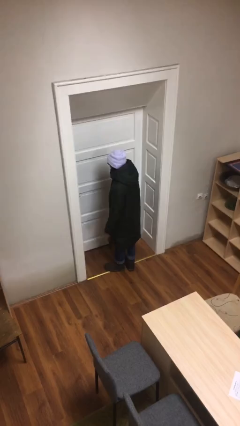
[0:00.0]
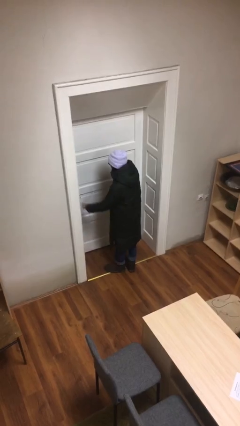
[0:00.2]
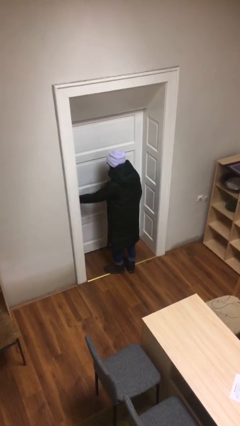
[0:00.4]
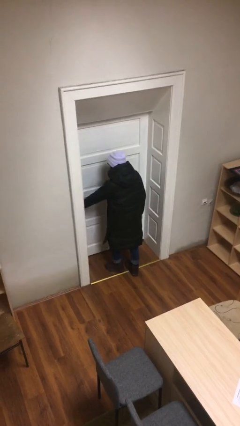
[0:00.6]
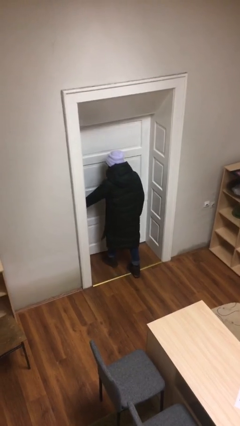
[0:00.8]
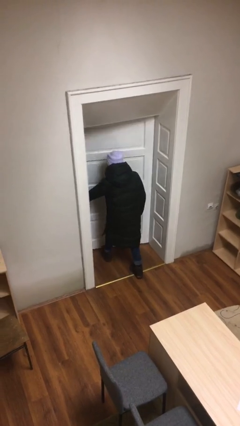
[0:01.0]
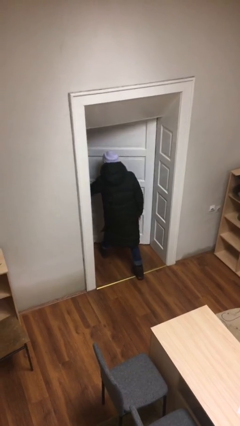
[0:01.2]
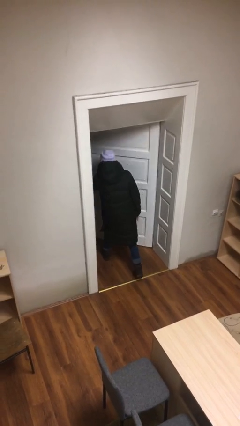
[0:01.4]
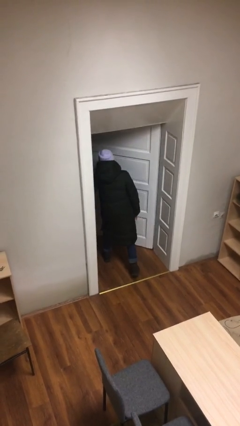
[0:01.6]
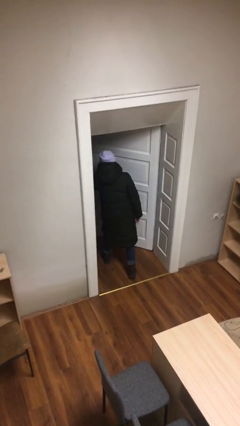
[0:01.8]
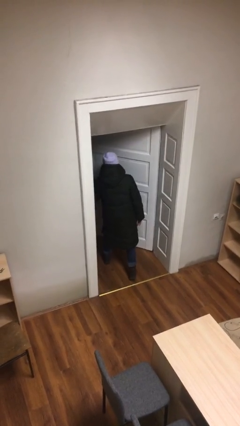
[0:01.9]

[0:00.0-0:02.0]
person opens facility door

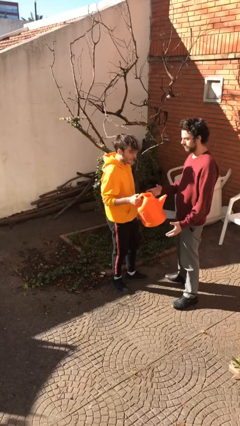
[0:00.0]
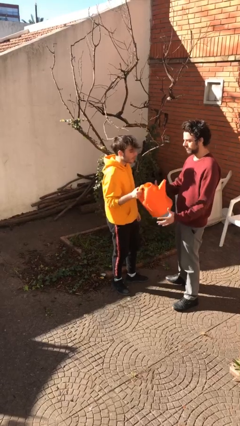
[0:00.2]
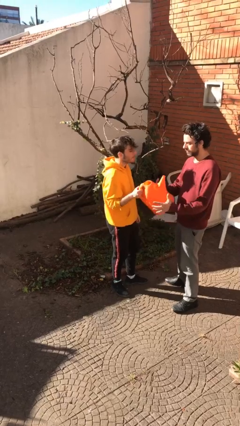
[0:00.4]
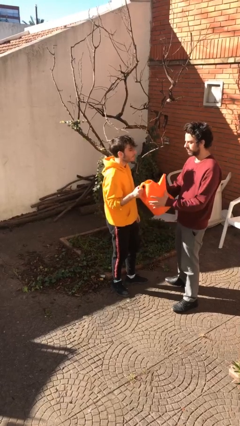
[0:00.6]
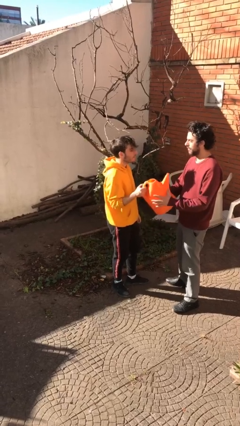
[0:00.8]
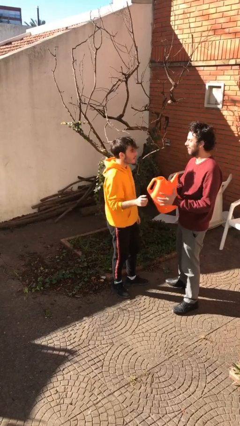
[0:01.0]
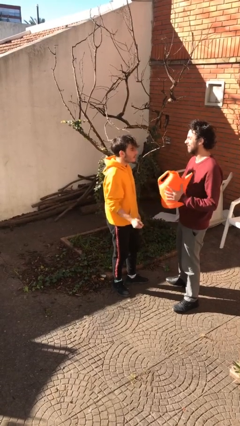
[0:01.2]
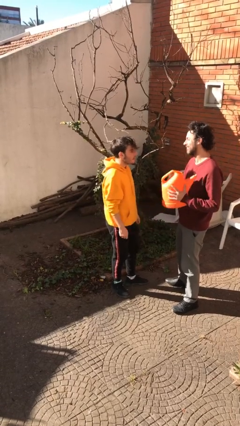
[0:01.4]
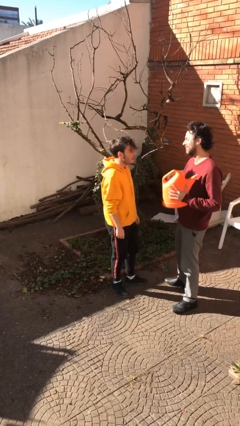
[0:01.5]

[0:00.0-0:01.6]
person transfers object to person

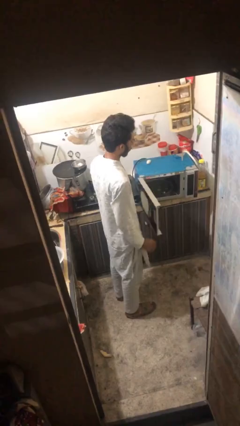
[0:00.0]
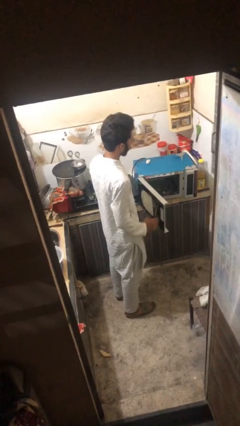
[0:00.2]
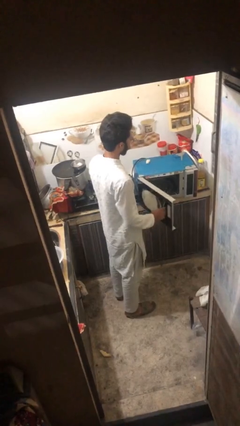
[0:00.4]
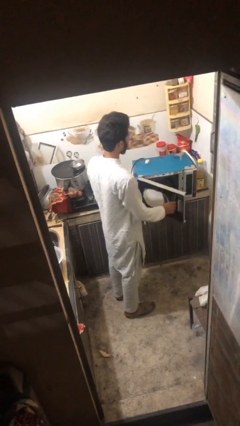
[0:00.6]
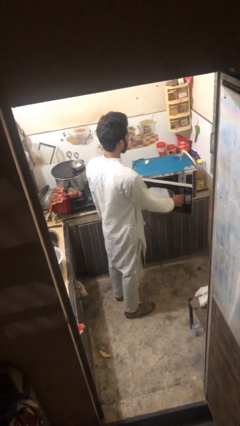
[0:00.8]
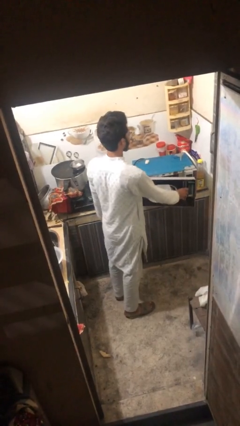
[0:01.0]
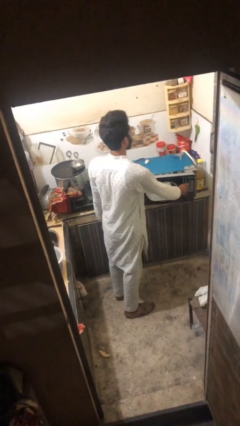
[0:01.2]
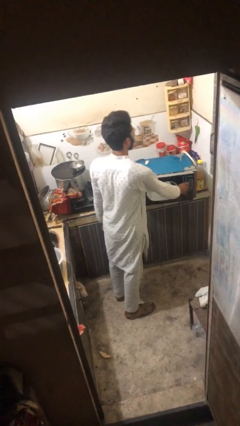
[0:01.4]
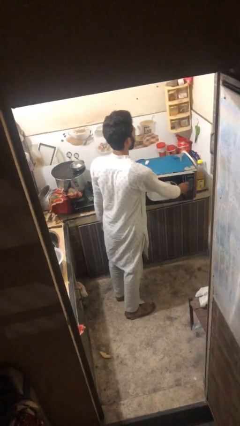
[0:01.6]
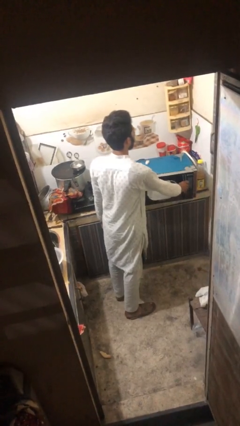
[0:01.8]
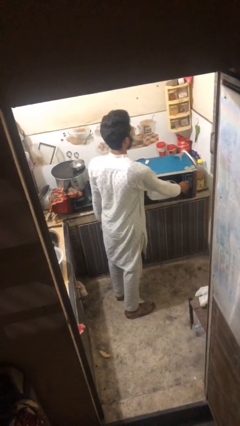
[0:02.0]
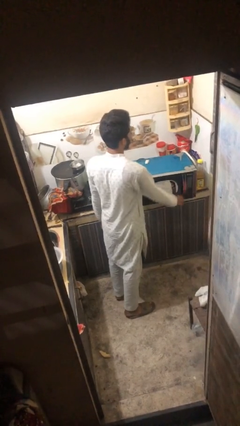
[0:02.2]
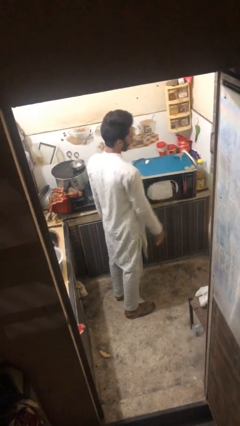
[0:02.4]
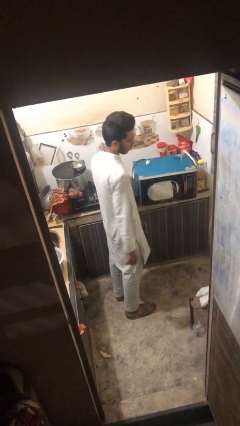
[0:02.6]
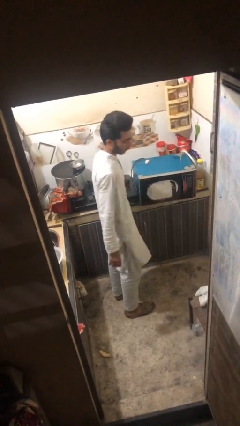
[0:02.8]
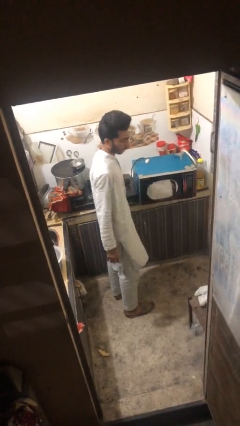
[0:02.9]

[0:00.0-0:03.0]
person closes oven door

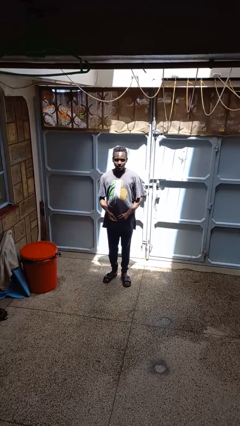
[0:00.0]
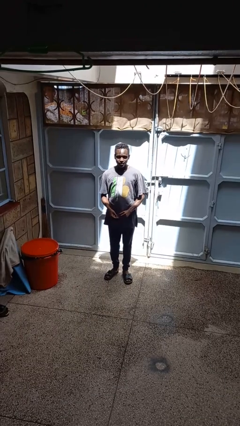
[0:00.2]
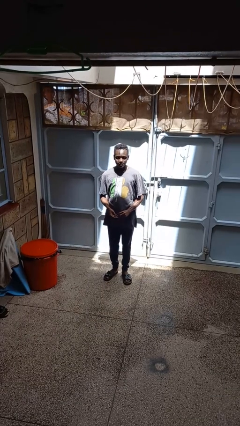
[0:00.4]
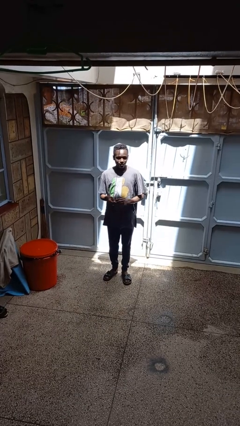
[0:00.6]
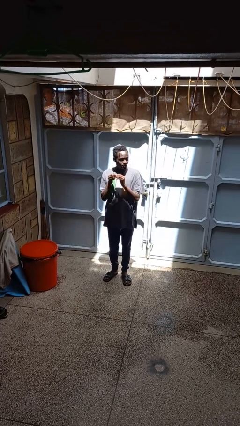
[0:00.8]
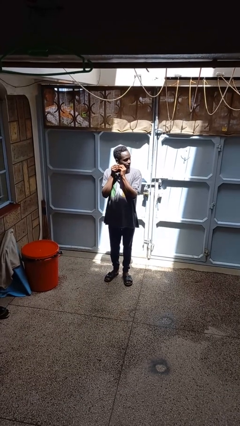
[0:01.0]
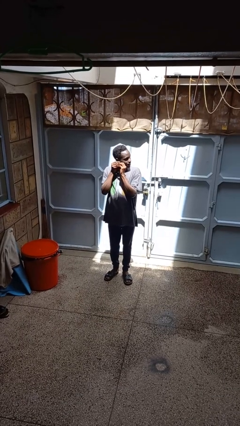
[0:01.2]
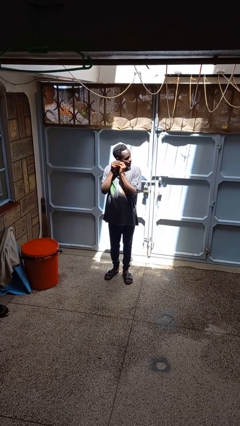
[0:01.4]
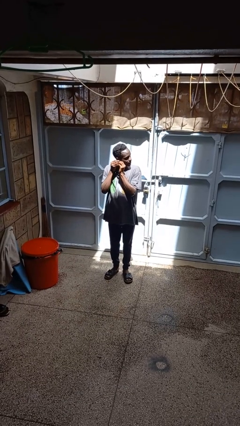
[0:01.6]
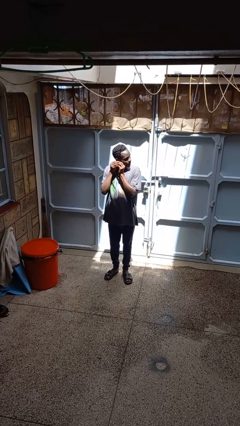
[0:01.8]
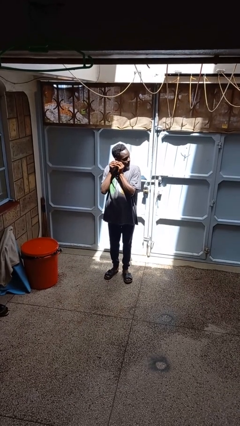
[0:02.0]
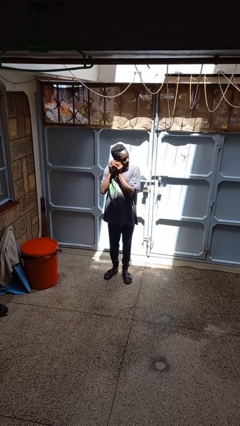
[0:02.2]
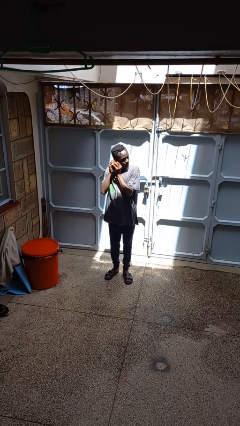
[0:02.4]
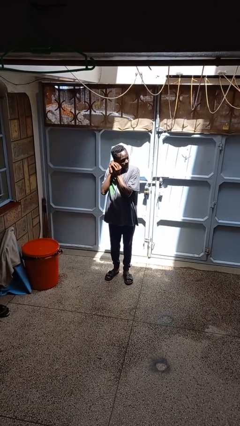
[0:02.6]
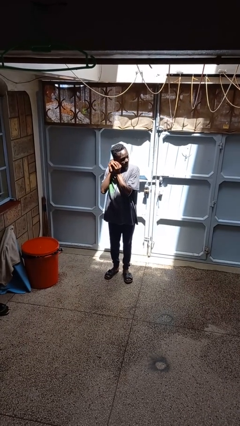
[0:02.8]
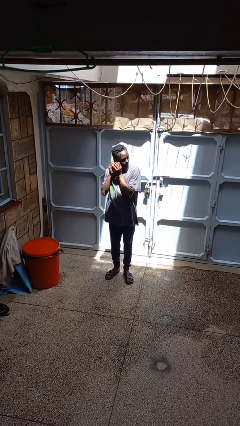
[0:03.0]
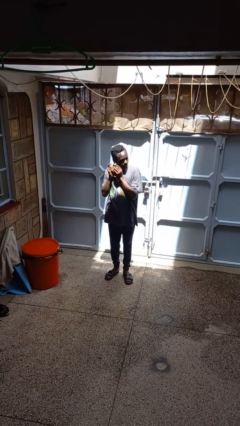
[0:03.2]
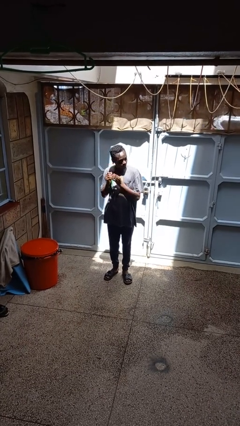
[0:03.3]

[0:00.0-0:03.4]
person puts on earrings

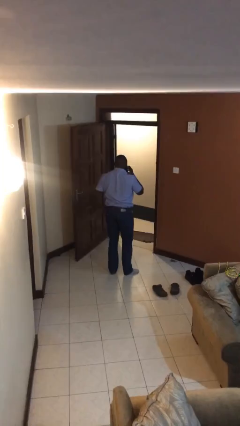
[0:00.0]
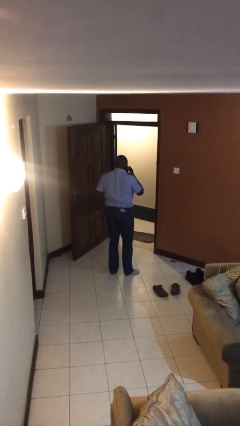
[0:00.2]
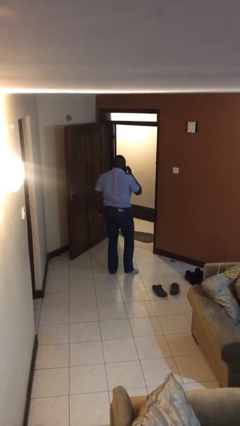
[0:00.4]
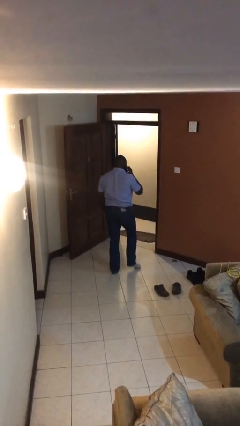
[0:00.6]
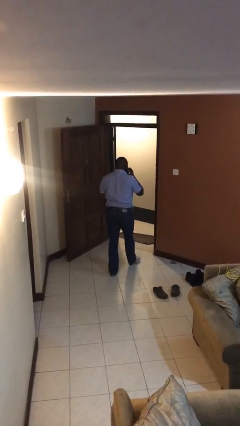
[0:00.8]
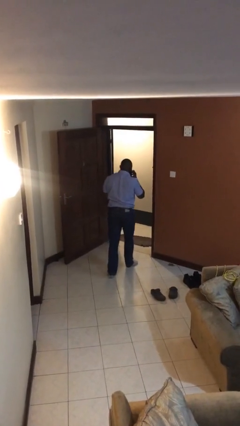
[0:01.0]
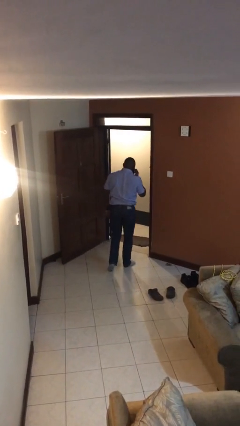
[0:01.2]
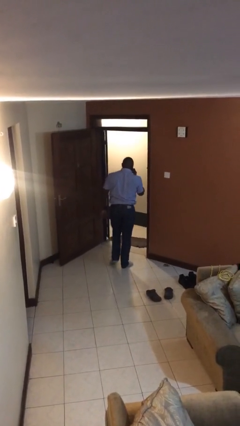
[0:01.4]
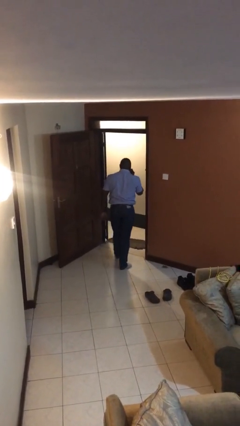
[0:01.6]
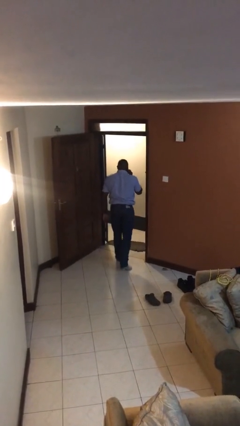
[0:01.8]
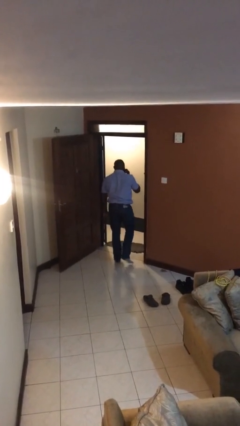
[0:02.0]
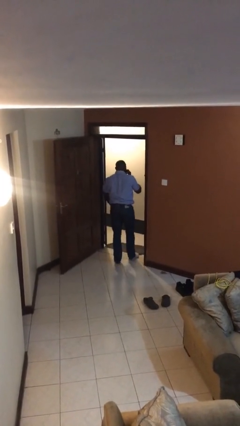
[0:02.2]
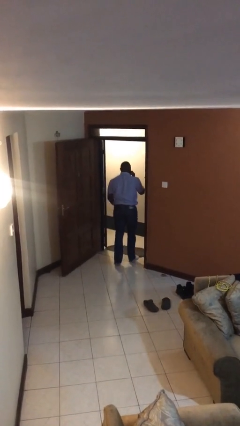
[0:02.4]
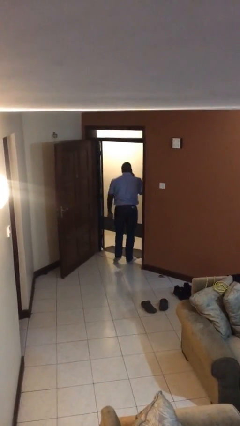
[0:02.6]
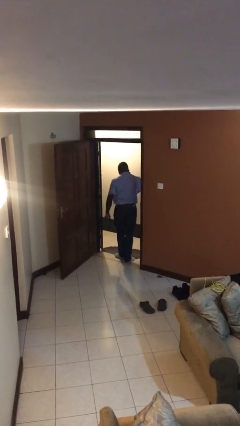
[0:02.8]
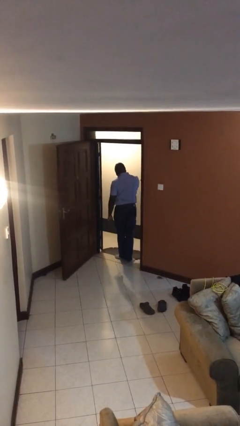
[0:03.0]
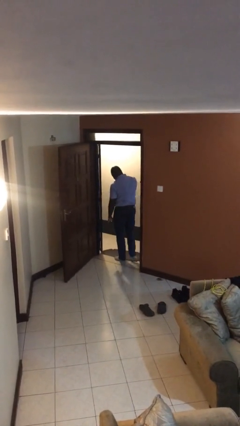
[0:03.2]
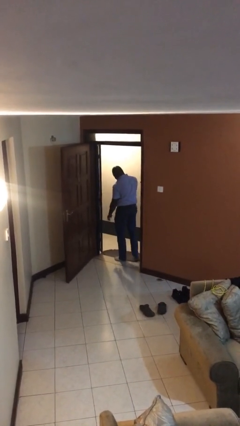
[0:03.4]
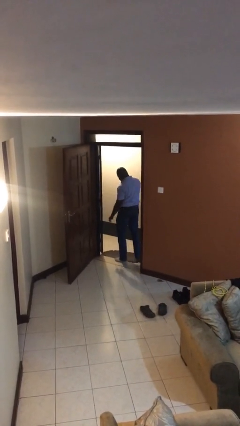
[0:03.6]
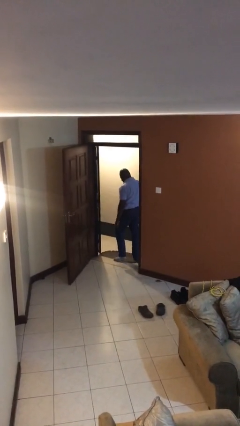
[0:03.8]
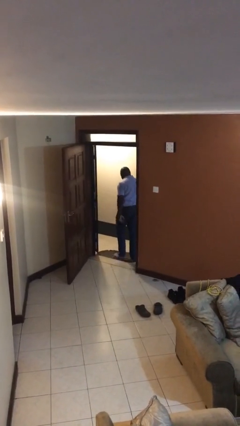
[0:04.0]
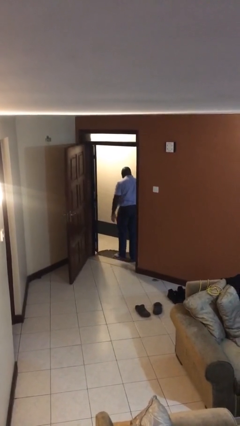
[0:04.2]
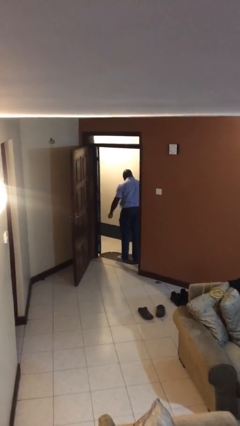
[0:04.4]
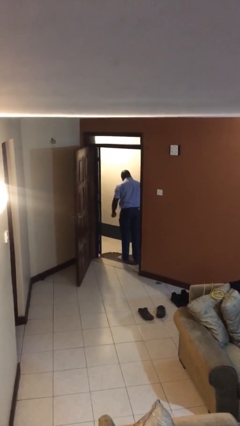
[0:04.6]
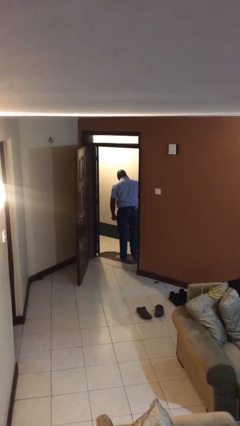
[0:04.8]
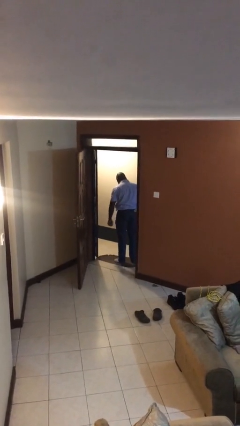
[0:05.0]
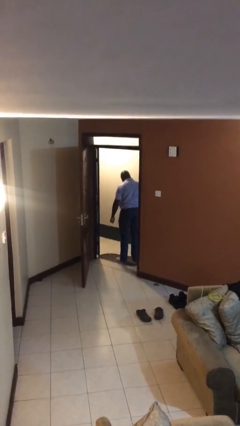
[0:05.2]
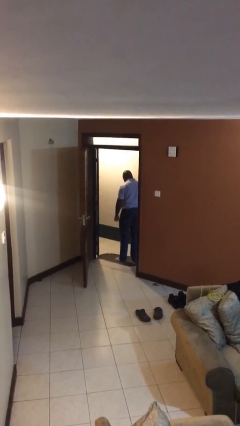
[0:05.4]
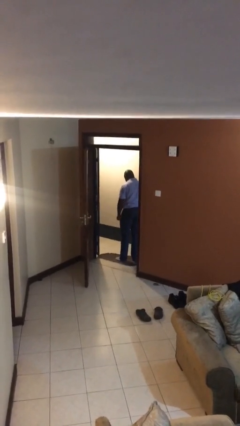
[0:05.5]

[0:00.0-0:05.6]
person exits scene through structure

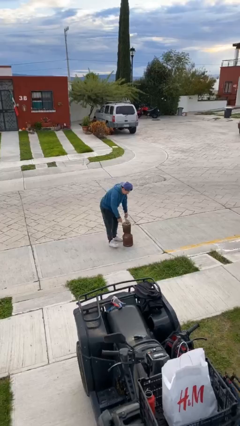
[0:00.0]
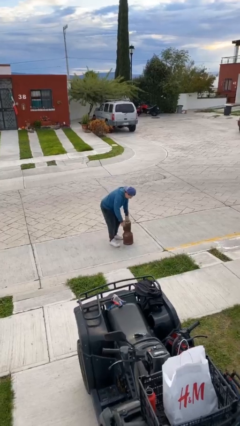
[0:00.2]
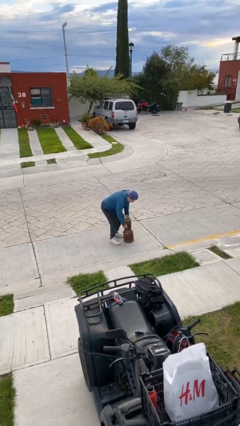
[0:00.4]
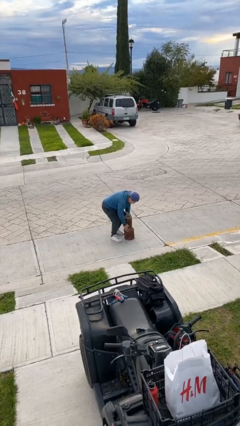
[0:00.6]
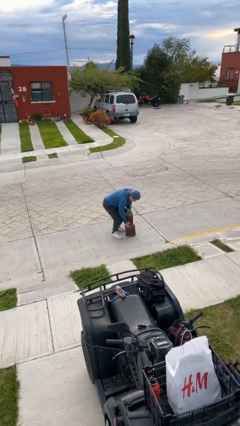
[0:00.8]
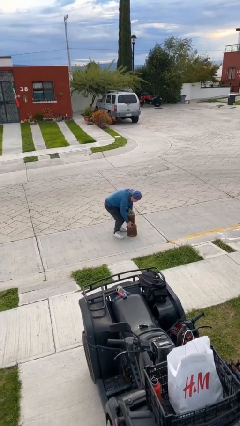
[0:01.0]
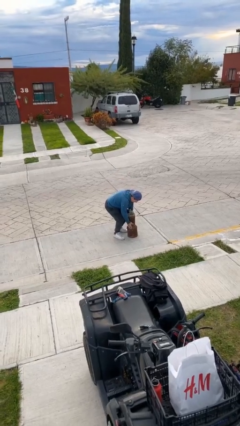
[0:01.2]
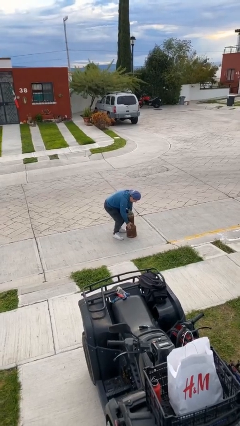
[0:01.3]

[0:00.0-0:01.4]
person picks up object from floor

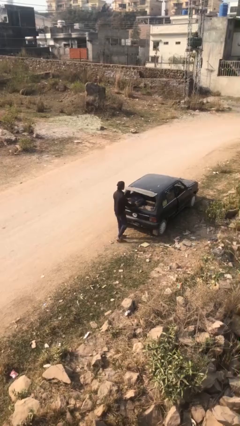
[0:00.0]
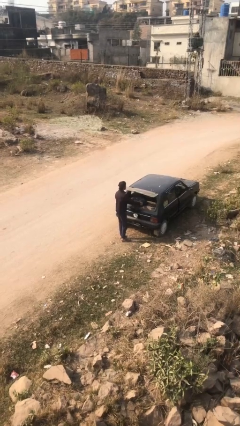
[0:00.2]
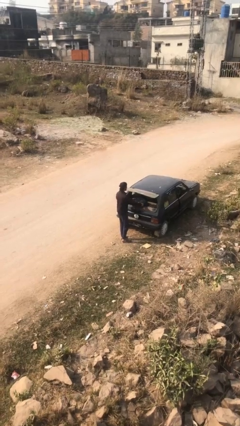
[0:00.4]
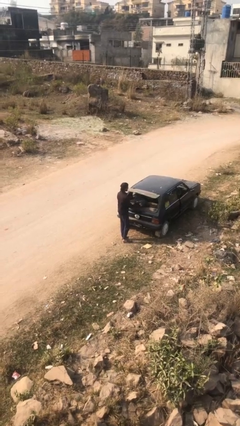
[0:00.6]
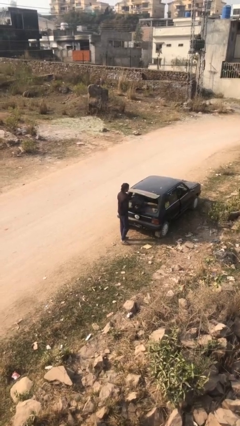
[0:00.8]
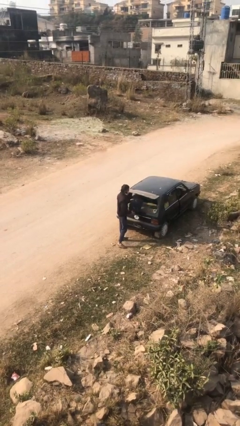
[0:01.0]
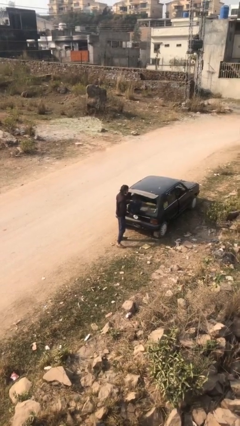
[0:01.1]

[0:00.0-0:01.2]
person unloads car
